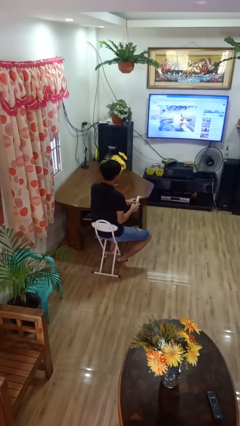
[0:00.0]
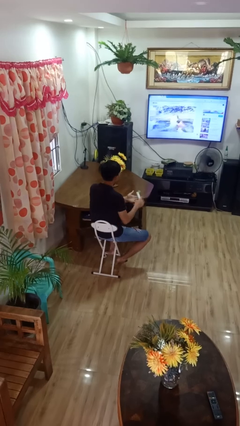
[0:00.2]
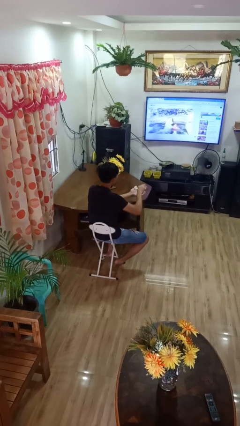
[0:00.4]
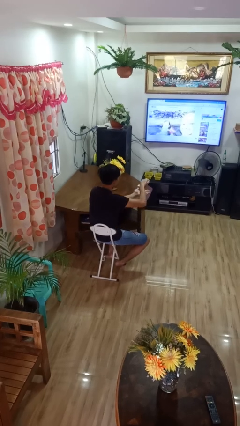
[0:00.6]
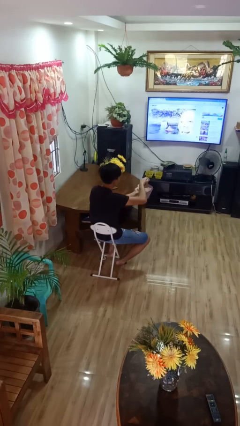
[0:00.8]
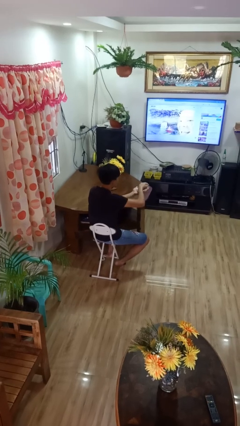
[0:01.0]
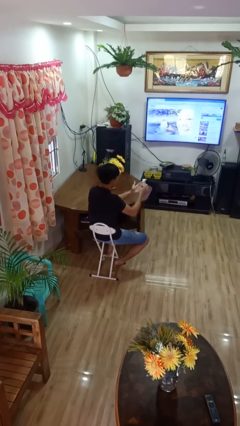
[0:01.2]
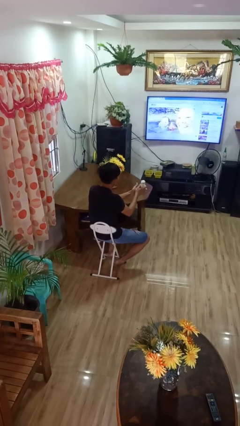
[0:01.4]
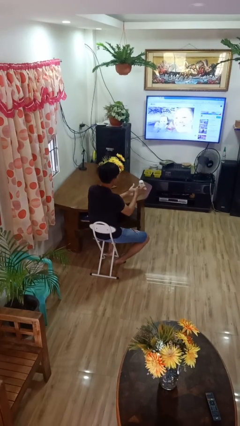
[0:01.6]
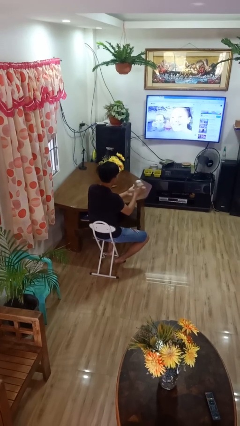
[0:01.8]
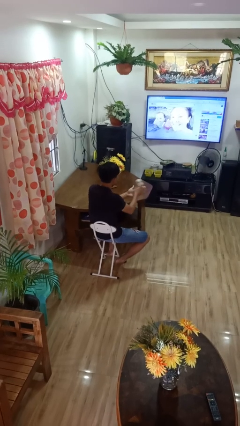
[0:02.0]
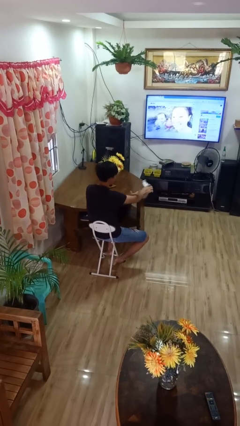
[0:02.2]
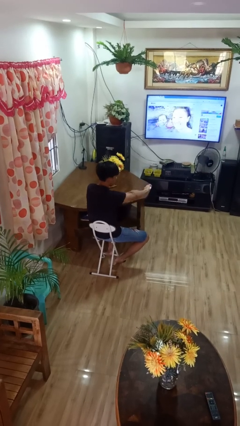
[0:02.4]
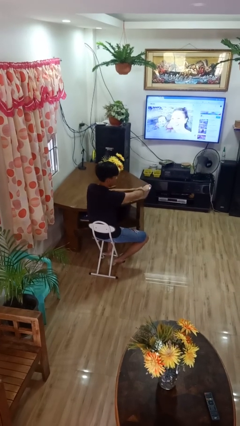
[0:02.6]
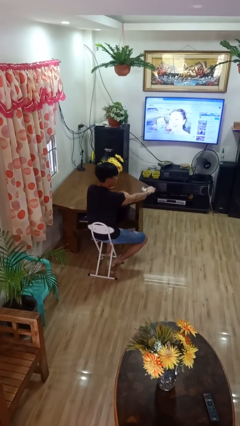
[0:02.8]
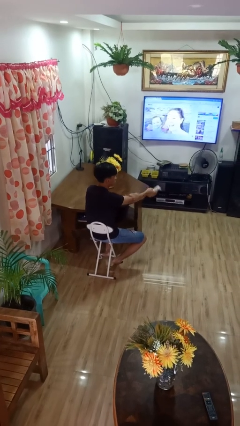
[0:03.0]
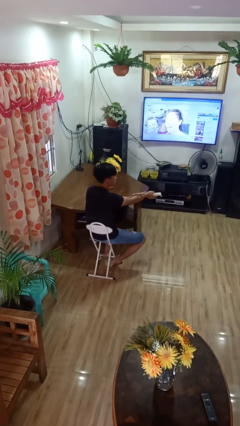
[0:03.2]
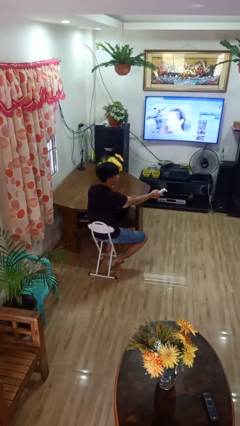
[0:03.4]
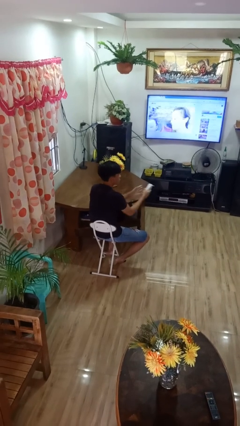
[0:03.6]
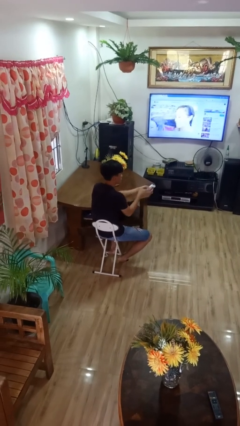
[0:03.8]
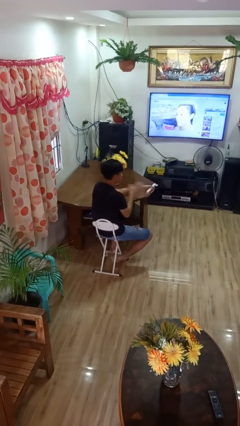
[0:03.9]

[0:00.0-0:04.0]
person applies sunscreen

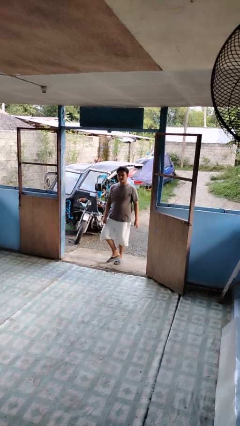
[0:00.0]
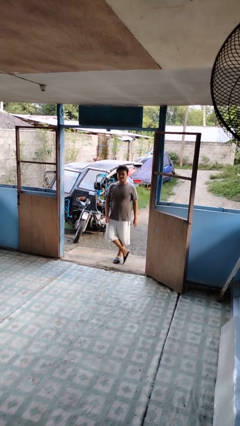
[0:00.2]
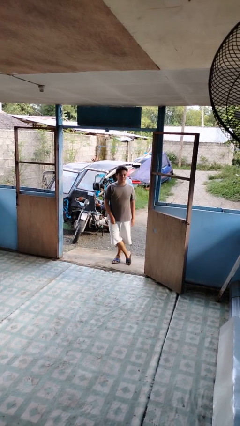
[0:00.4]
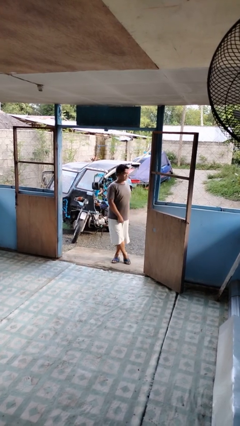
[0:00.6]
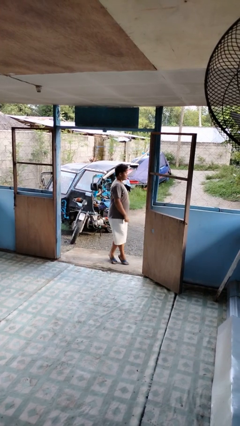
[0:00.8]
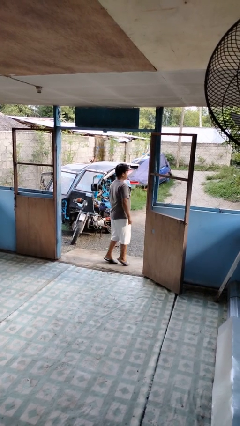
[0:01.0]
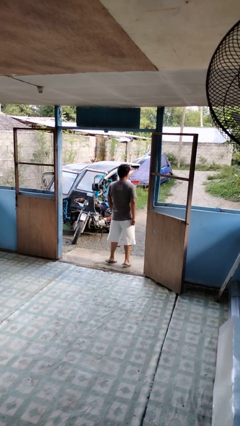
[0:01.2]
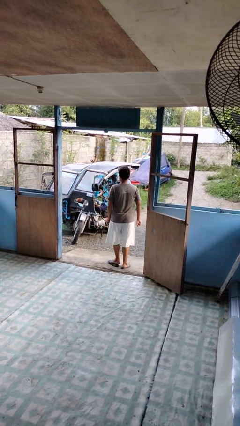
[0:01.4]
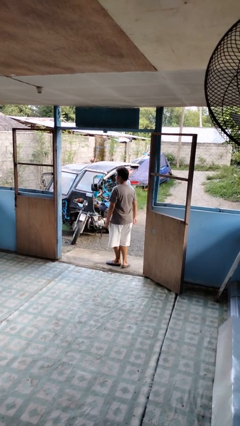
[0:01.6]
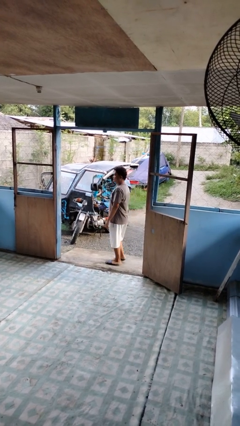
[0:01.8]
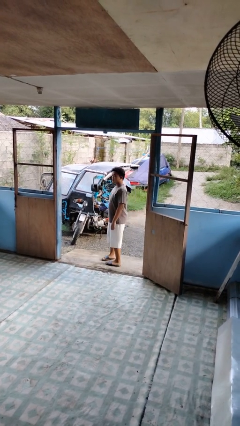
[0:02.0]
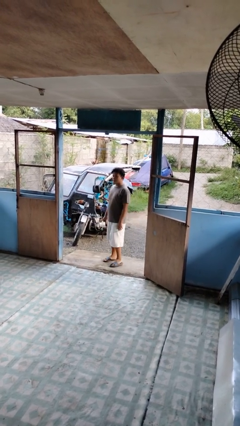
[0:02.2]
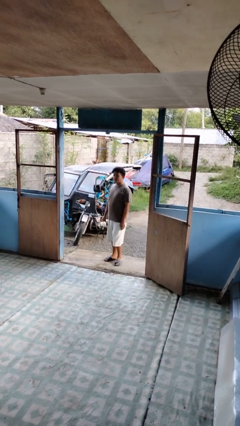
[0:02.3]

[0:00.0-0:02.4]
person twirls

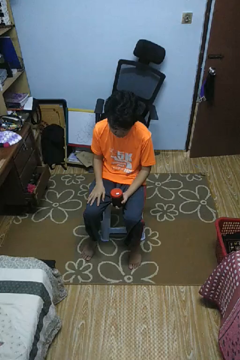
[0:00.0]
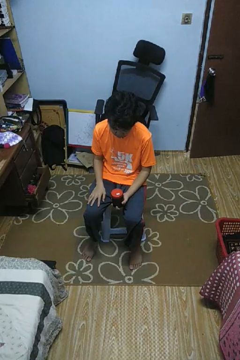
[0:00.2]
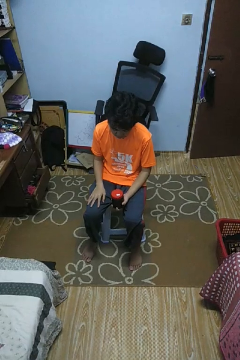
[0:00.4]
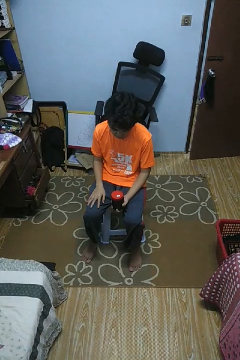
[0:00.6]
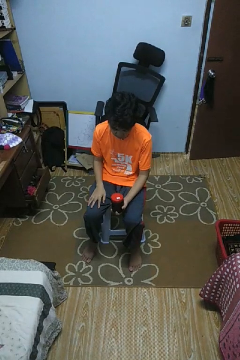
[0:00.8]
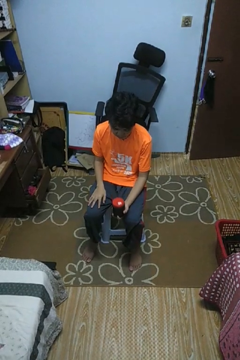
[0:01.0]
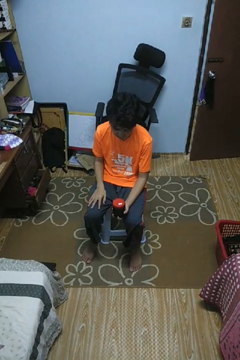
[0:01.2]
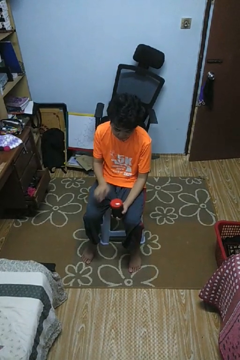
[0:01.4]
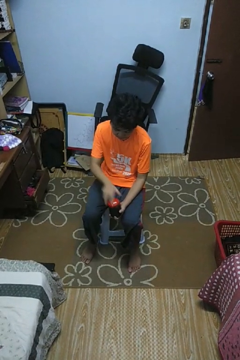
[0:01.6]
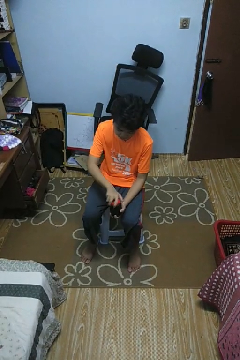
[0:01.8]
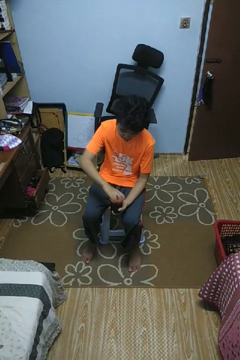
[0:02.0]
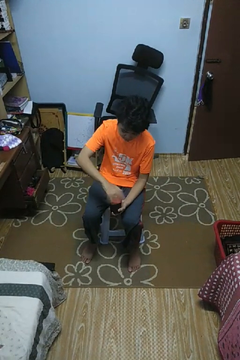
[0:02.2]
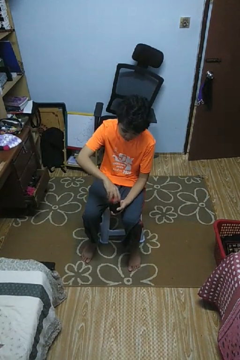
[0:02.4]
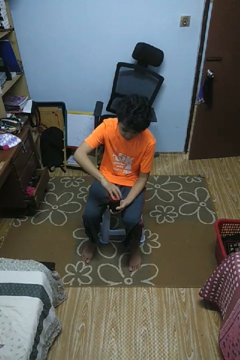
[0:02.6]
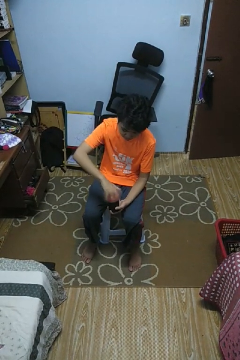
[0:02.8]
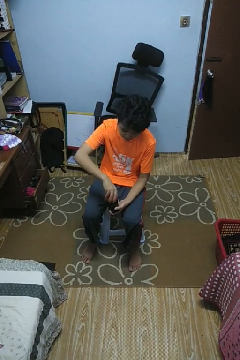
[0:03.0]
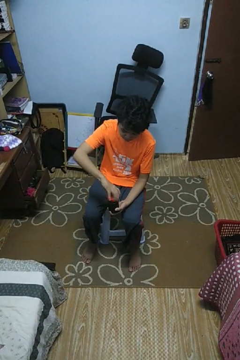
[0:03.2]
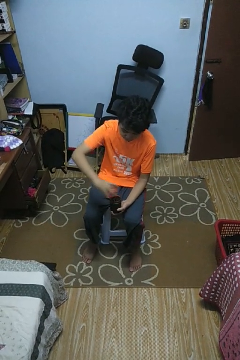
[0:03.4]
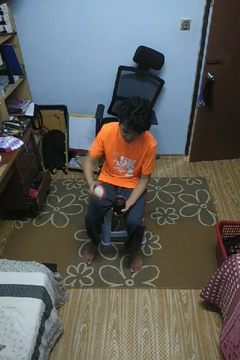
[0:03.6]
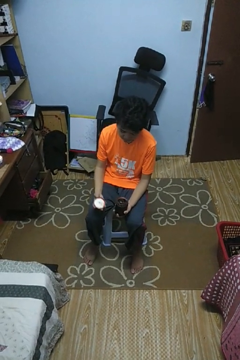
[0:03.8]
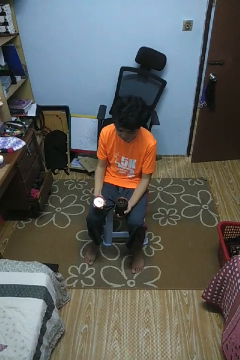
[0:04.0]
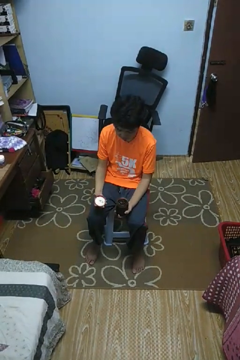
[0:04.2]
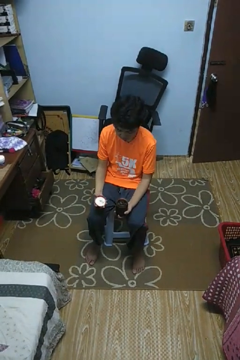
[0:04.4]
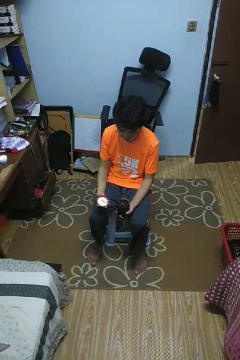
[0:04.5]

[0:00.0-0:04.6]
person opens jar

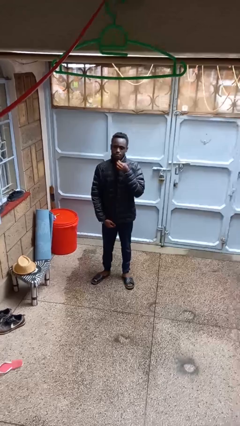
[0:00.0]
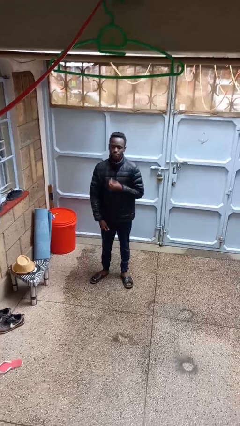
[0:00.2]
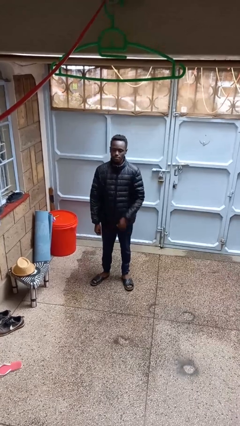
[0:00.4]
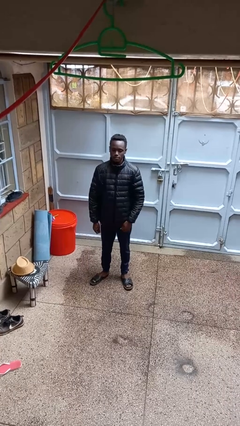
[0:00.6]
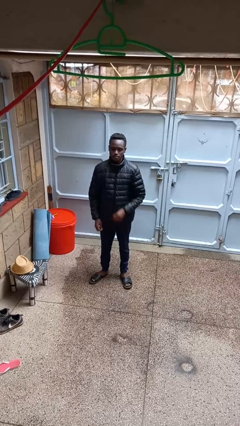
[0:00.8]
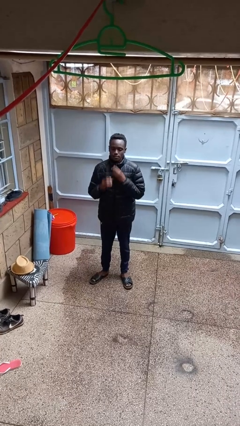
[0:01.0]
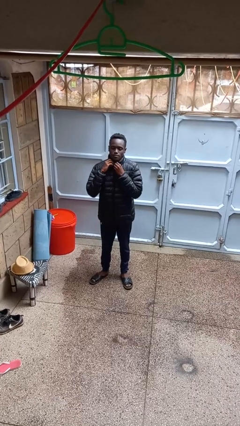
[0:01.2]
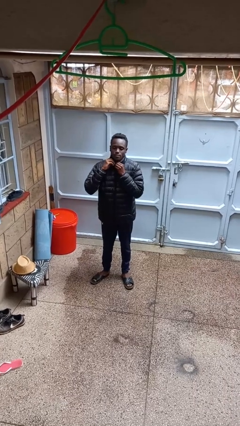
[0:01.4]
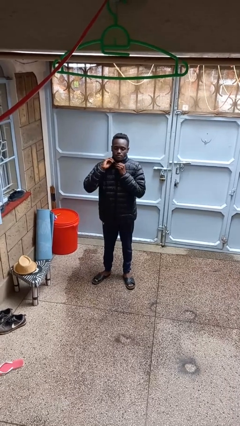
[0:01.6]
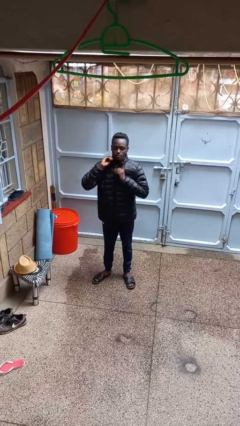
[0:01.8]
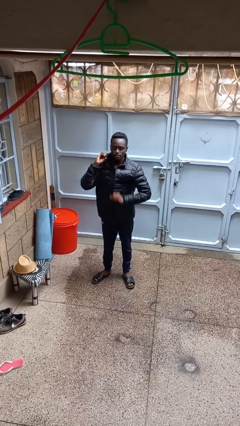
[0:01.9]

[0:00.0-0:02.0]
person unzips jacket

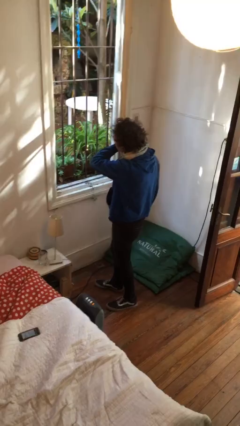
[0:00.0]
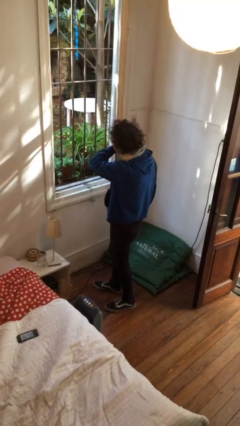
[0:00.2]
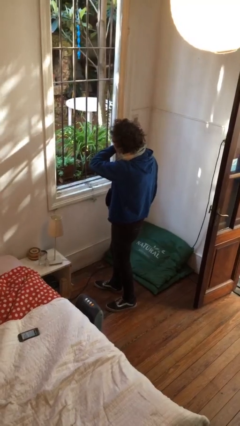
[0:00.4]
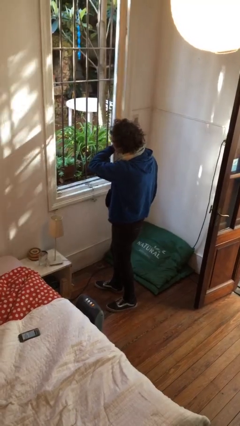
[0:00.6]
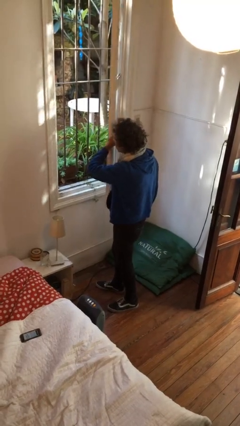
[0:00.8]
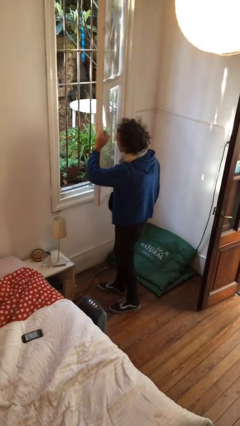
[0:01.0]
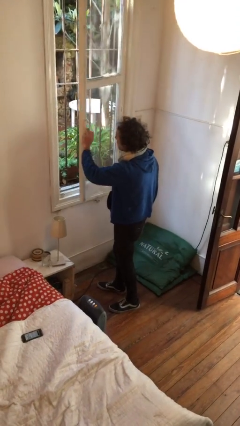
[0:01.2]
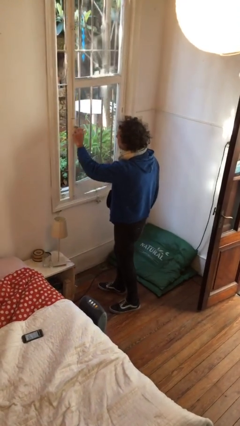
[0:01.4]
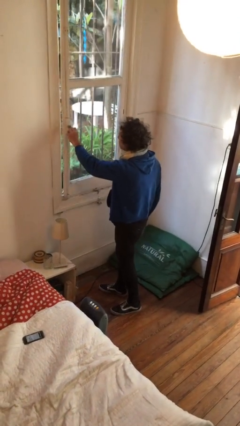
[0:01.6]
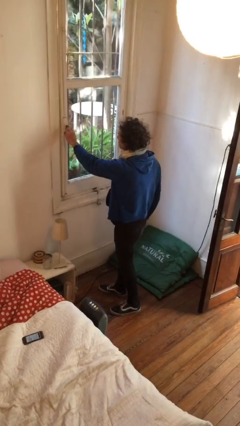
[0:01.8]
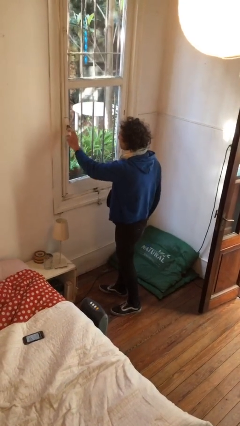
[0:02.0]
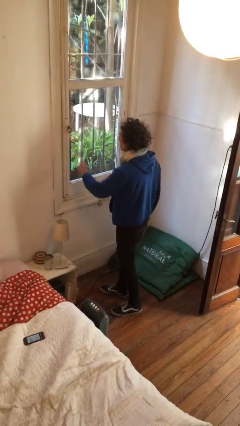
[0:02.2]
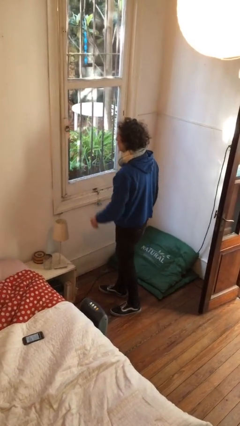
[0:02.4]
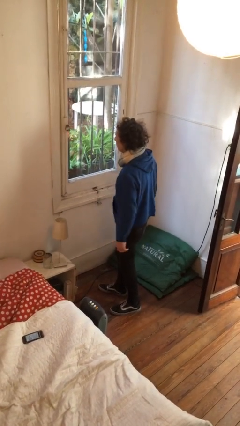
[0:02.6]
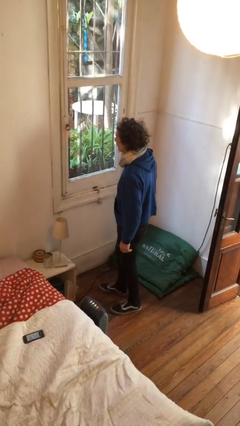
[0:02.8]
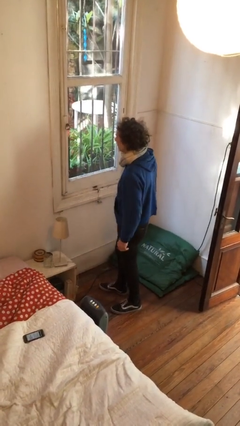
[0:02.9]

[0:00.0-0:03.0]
person closes home window

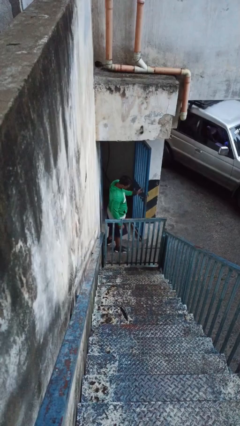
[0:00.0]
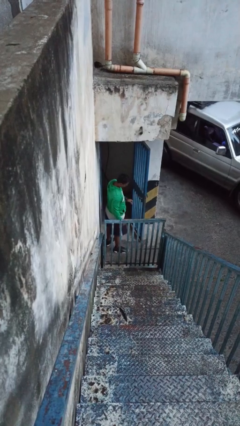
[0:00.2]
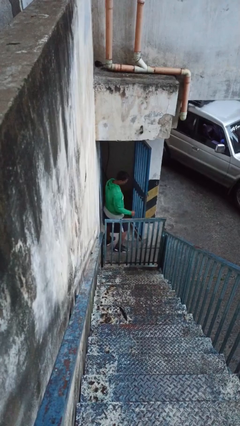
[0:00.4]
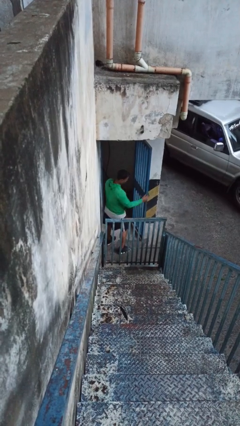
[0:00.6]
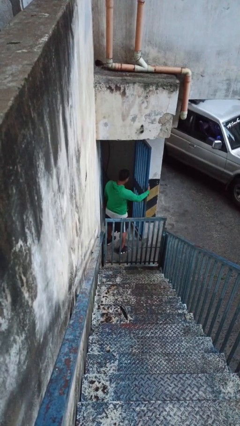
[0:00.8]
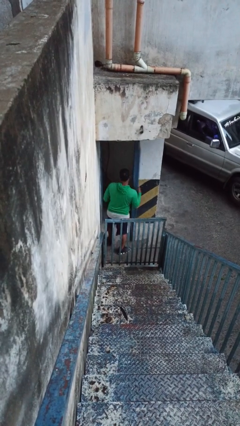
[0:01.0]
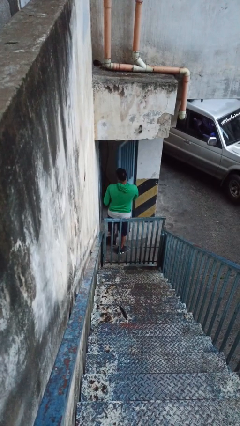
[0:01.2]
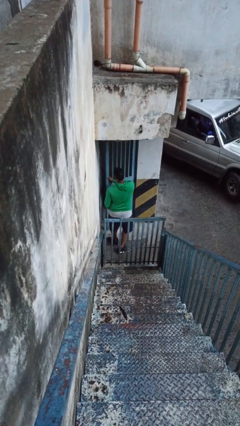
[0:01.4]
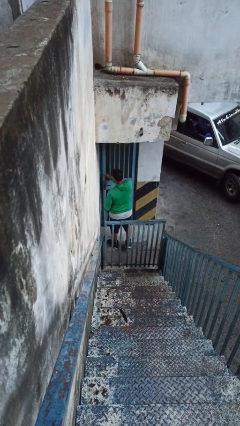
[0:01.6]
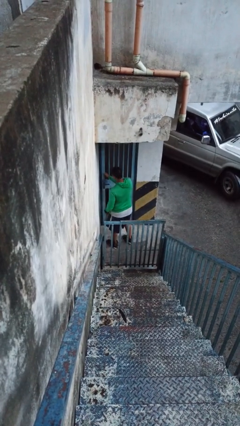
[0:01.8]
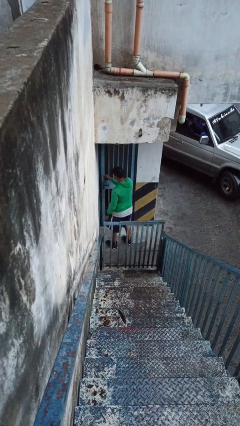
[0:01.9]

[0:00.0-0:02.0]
person closes facility door
